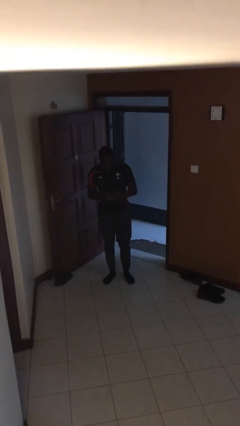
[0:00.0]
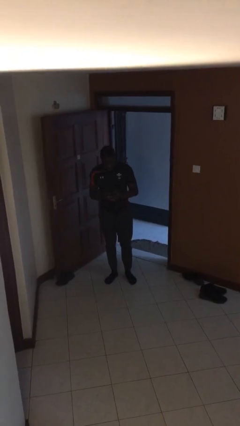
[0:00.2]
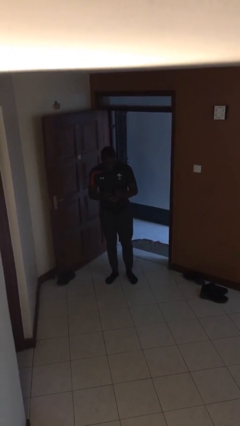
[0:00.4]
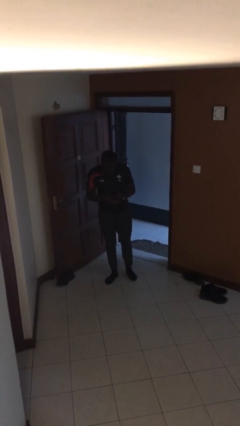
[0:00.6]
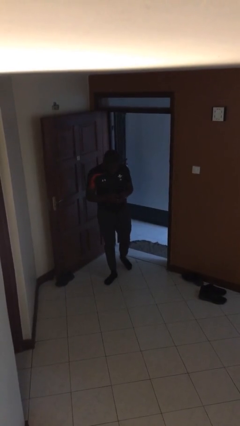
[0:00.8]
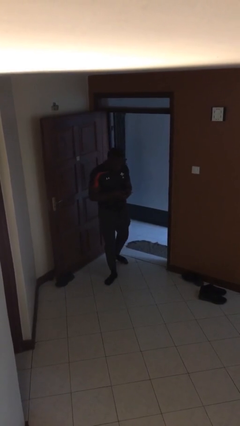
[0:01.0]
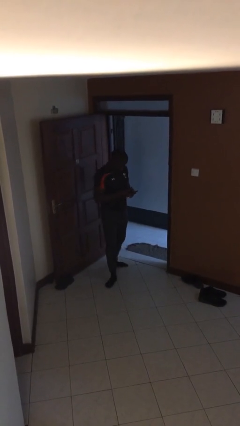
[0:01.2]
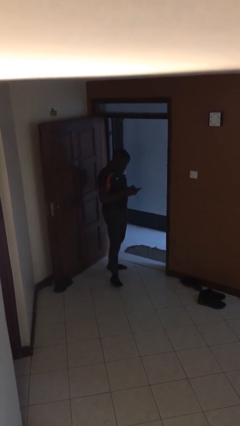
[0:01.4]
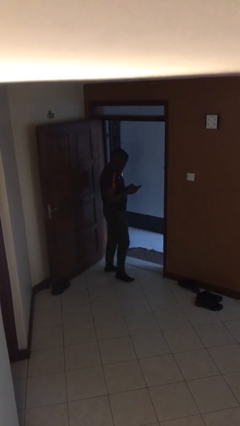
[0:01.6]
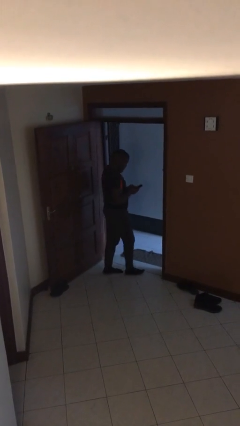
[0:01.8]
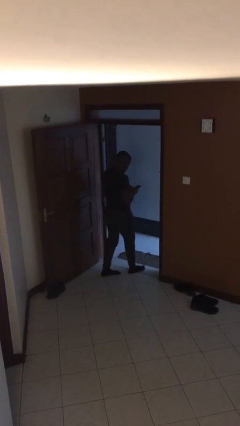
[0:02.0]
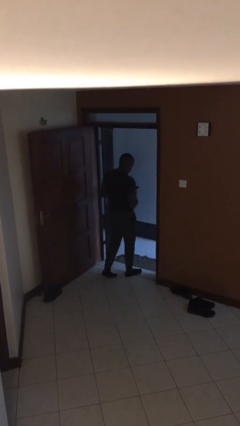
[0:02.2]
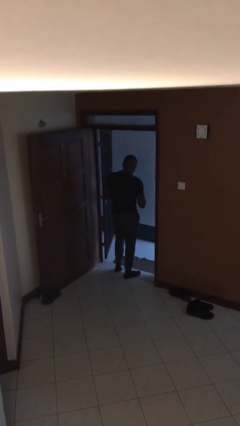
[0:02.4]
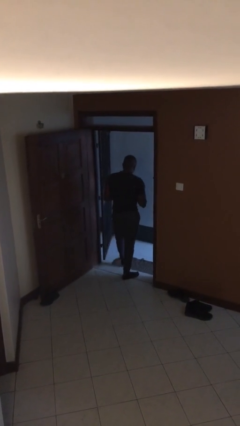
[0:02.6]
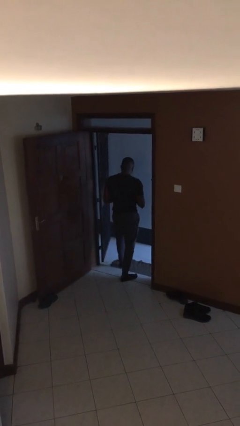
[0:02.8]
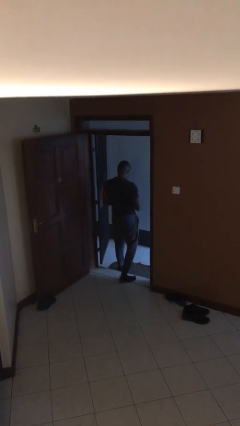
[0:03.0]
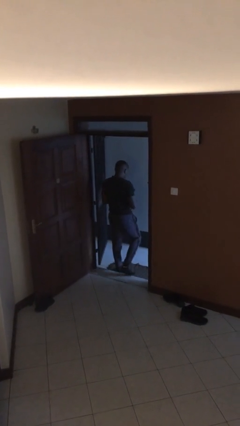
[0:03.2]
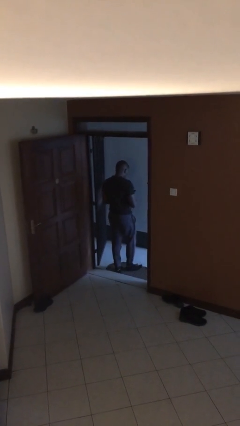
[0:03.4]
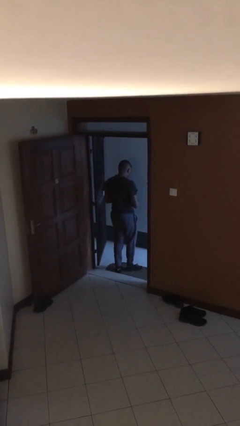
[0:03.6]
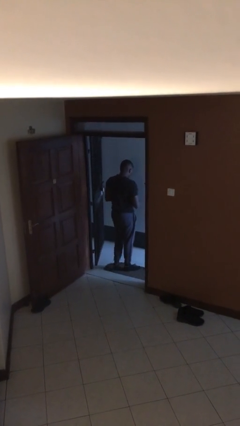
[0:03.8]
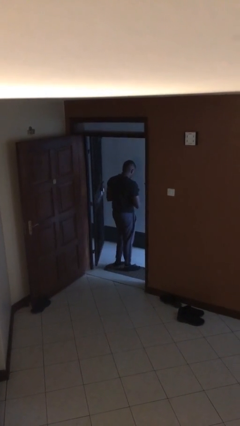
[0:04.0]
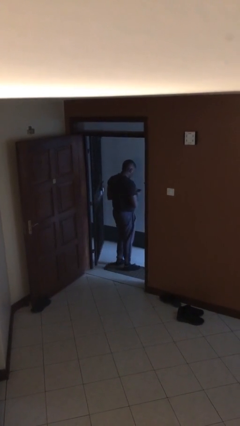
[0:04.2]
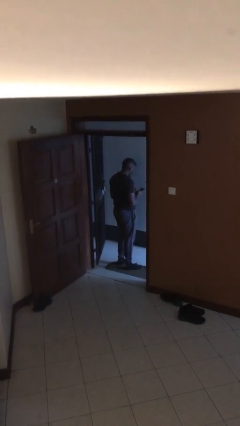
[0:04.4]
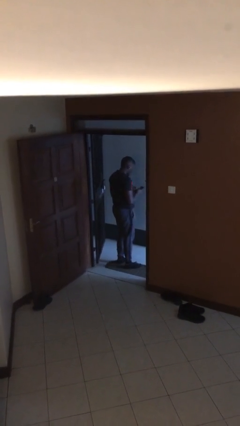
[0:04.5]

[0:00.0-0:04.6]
person exits scene through structure

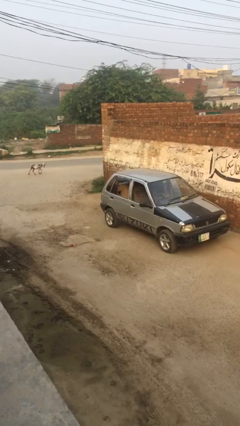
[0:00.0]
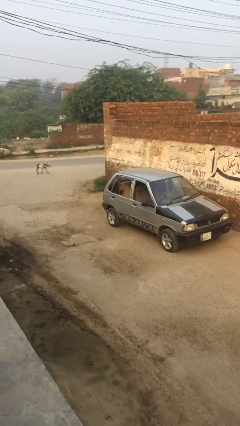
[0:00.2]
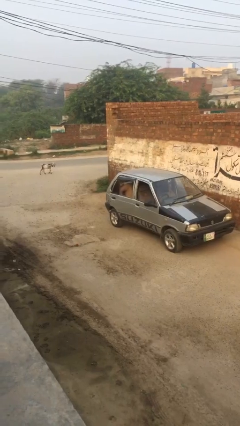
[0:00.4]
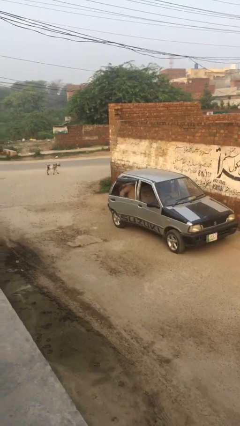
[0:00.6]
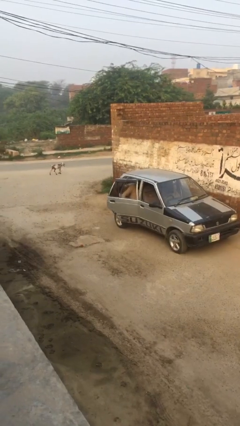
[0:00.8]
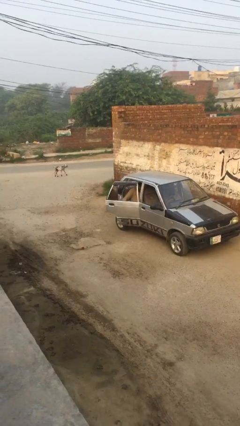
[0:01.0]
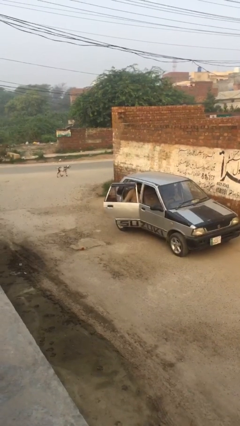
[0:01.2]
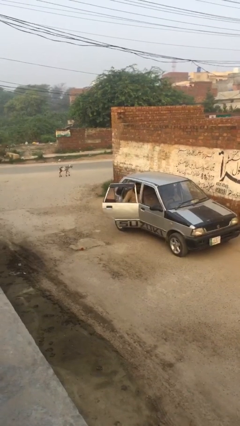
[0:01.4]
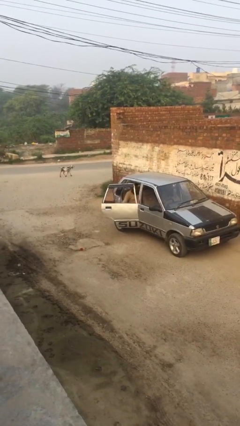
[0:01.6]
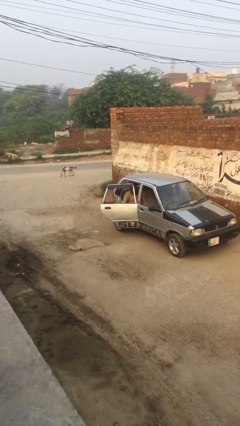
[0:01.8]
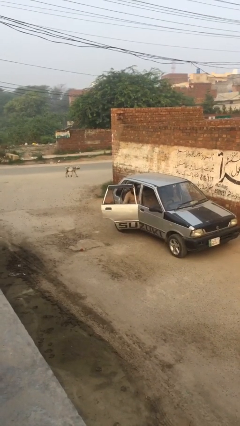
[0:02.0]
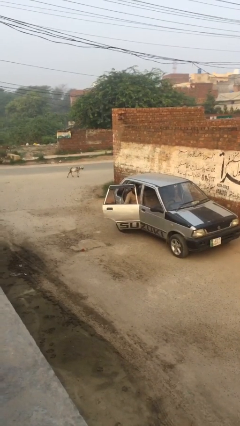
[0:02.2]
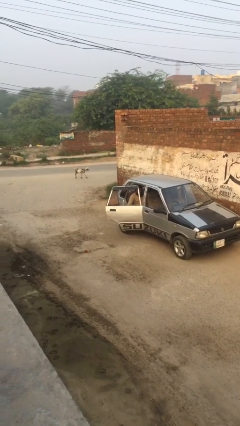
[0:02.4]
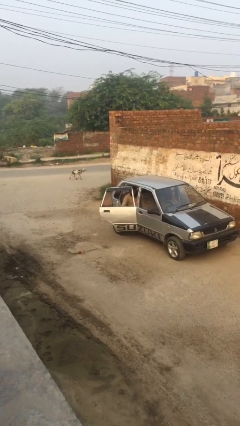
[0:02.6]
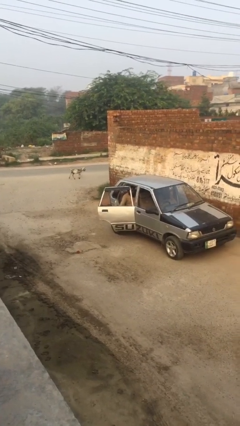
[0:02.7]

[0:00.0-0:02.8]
person opens car door

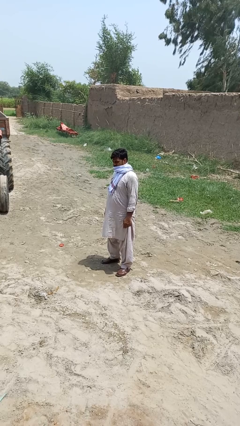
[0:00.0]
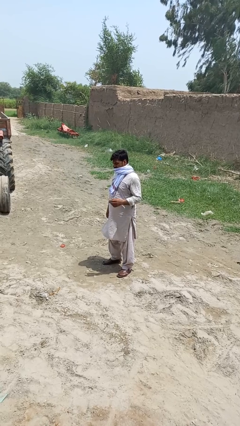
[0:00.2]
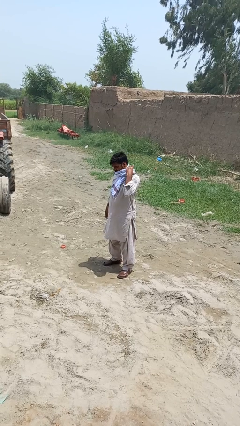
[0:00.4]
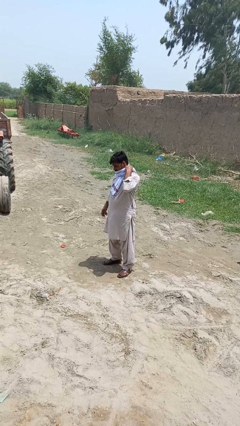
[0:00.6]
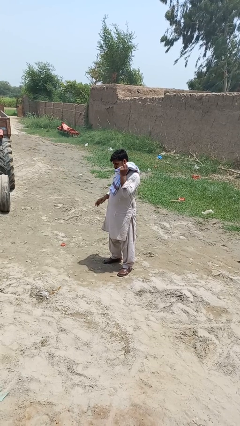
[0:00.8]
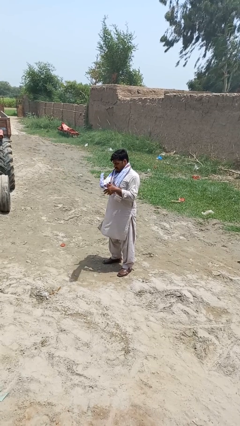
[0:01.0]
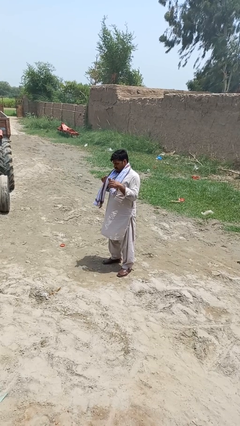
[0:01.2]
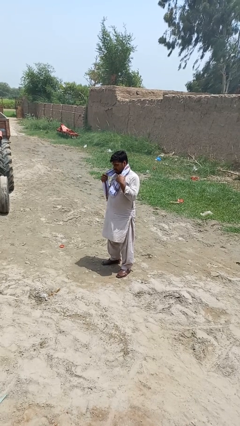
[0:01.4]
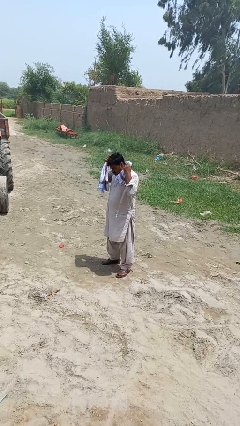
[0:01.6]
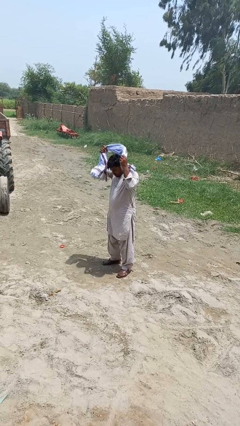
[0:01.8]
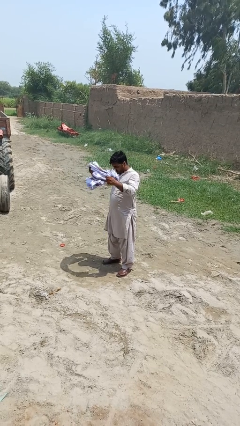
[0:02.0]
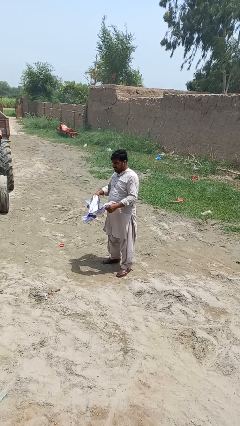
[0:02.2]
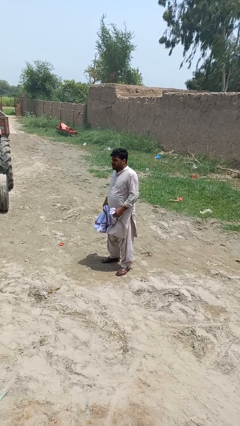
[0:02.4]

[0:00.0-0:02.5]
person takes off scarf

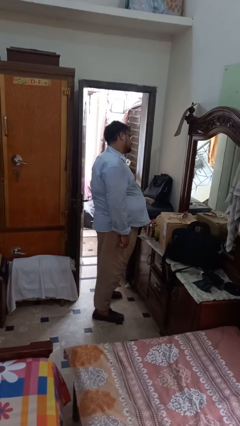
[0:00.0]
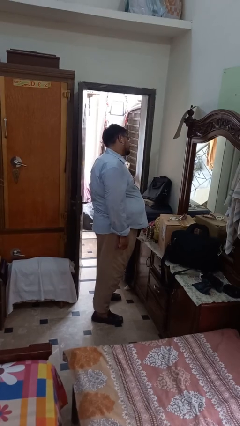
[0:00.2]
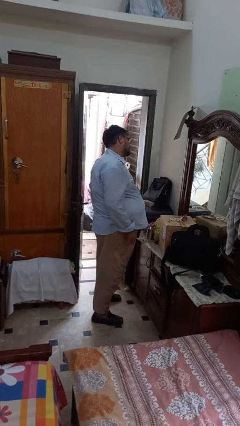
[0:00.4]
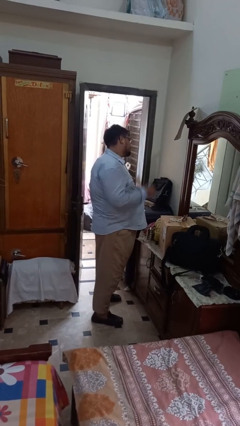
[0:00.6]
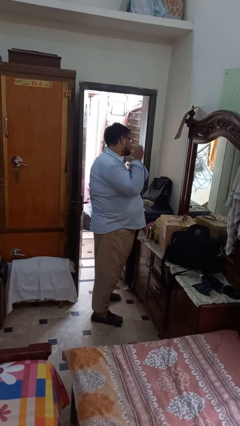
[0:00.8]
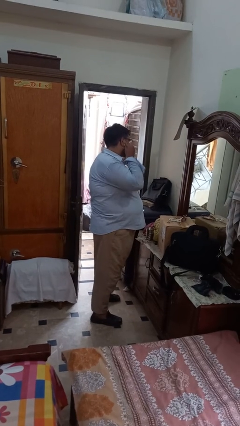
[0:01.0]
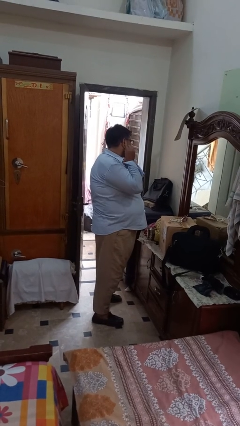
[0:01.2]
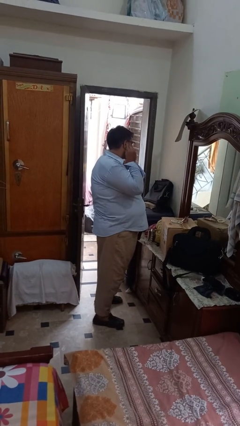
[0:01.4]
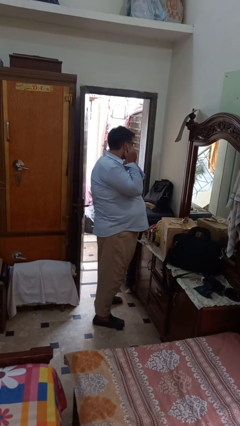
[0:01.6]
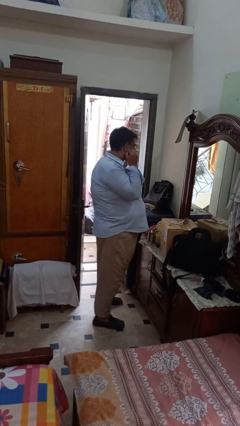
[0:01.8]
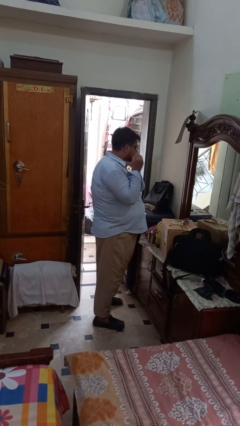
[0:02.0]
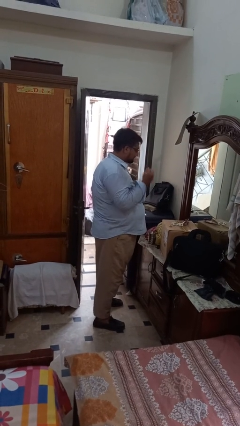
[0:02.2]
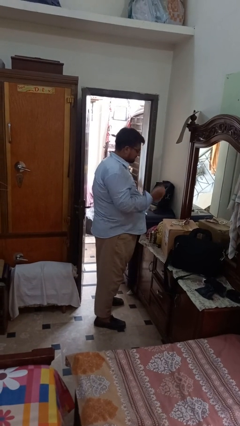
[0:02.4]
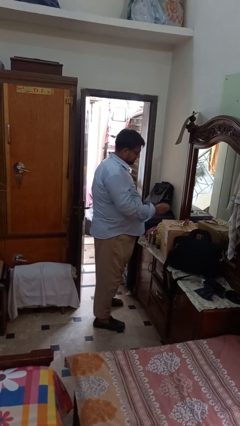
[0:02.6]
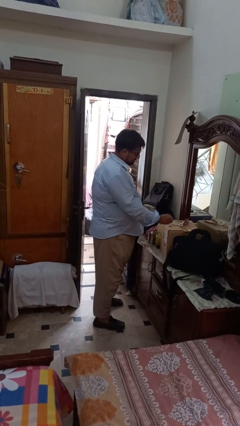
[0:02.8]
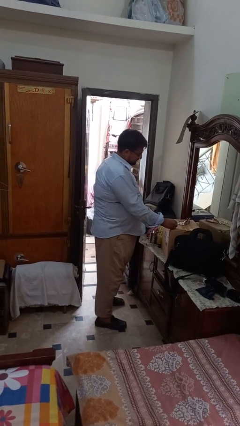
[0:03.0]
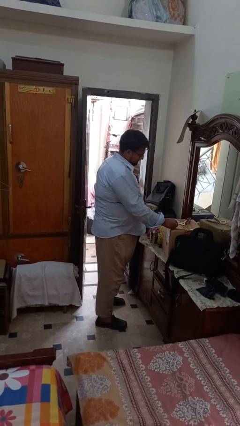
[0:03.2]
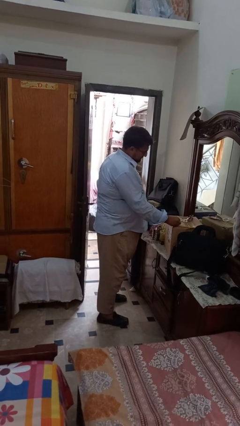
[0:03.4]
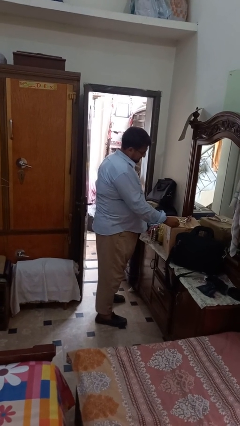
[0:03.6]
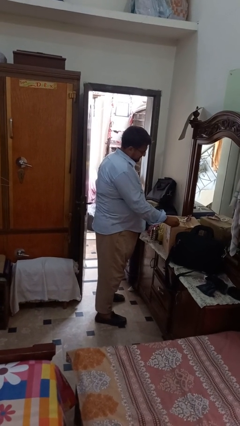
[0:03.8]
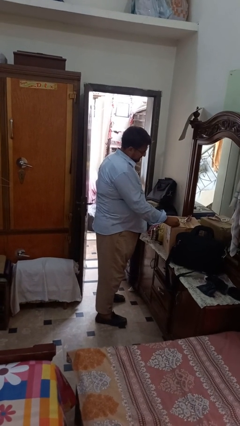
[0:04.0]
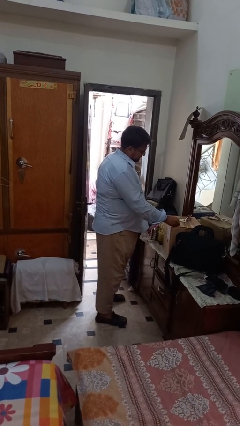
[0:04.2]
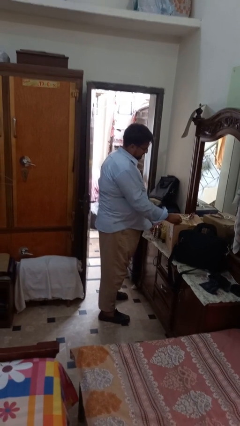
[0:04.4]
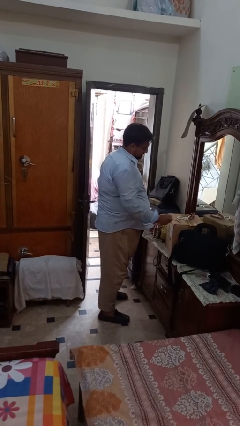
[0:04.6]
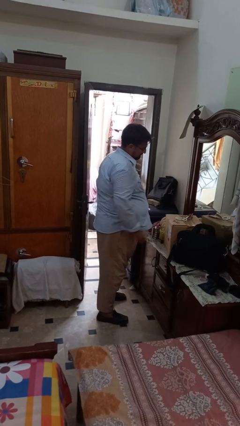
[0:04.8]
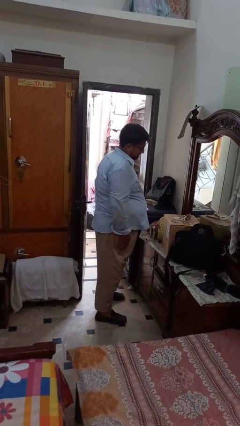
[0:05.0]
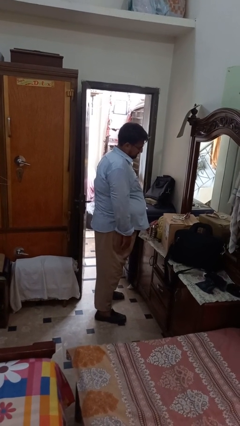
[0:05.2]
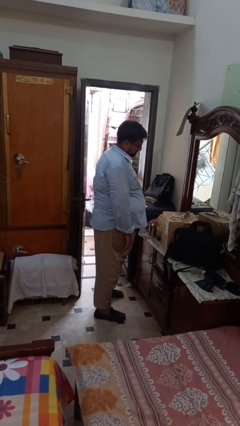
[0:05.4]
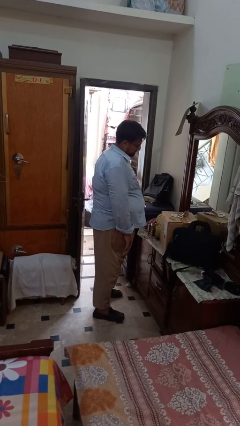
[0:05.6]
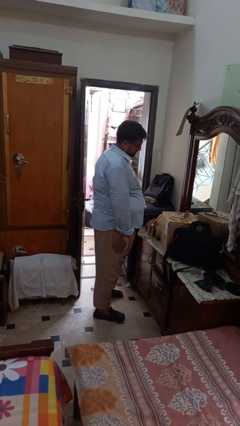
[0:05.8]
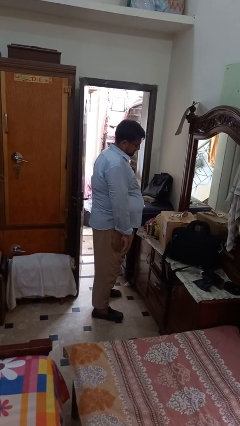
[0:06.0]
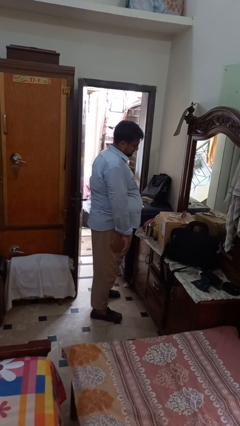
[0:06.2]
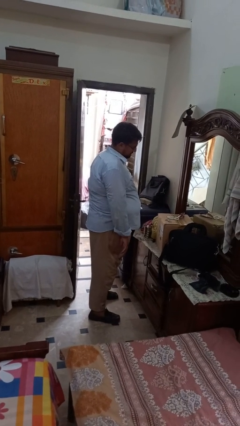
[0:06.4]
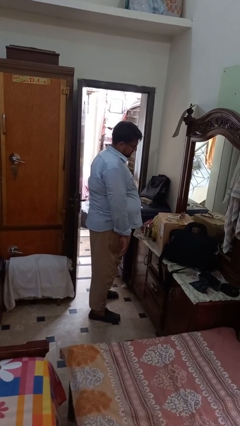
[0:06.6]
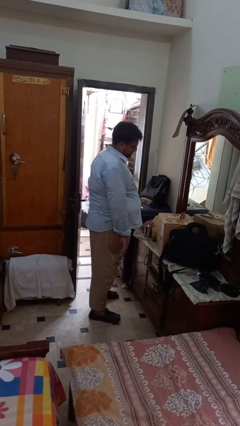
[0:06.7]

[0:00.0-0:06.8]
person takes off earrings

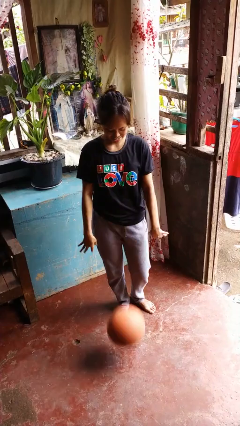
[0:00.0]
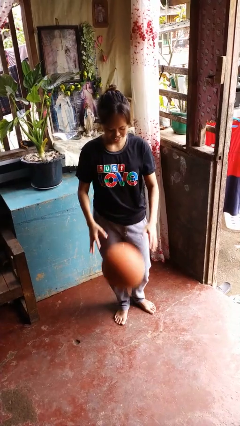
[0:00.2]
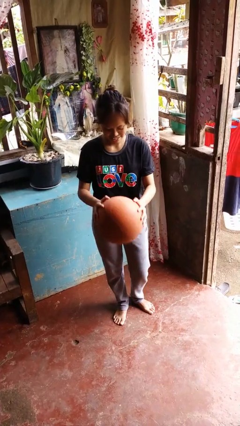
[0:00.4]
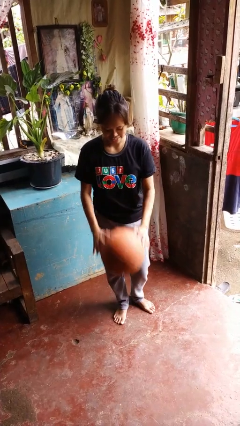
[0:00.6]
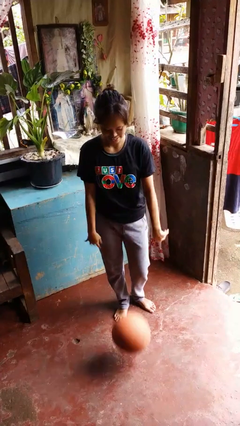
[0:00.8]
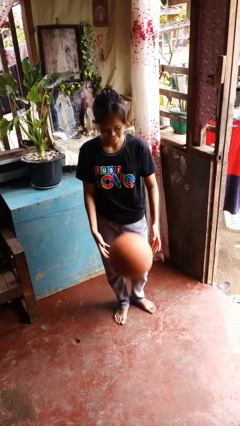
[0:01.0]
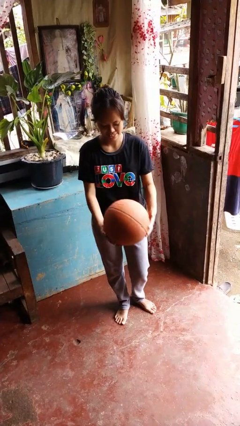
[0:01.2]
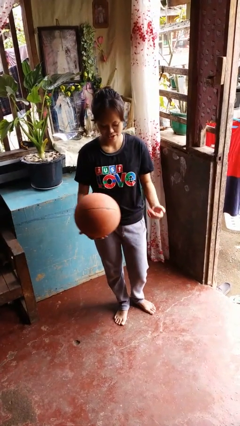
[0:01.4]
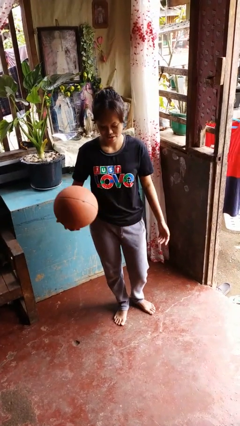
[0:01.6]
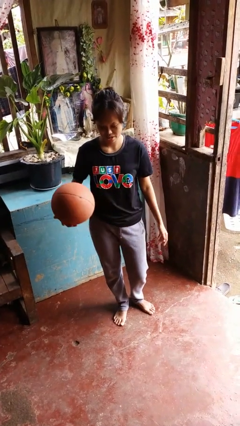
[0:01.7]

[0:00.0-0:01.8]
person bounces ball on floor
